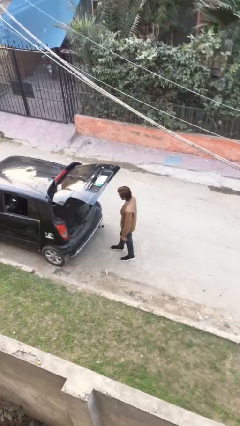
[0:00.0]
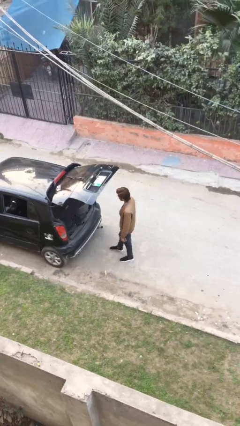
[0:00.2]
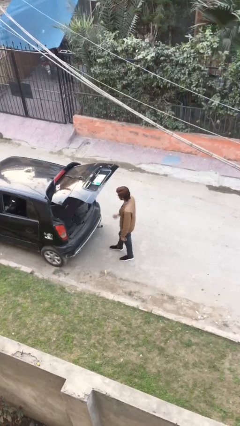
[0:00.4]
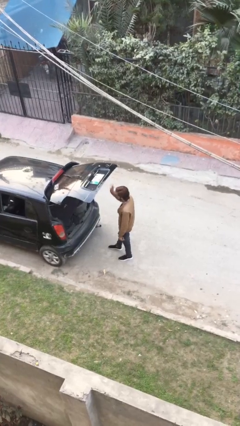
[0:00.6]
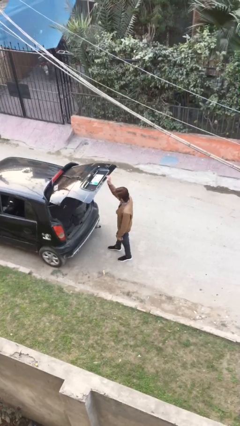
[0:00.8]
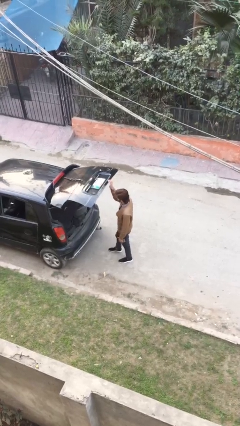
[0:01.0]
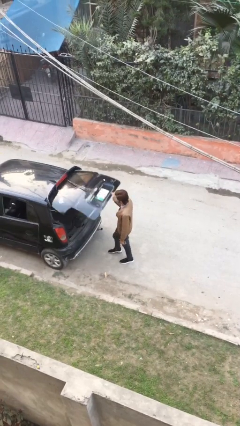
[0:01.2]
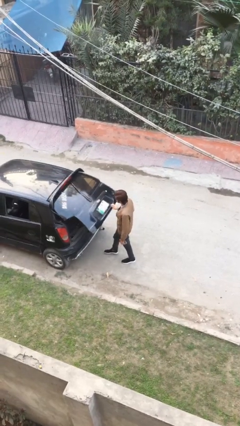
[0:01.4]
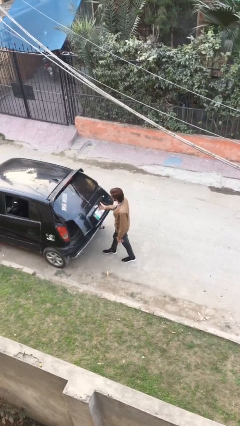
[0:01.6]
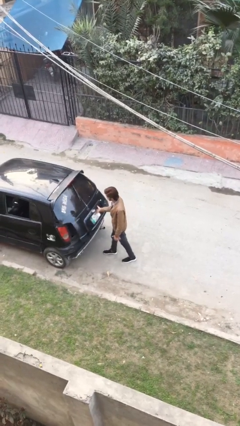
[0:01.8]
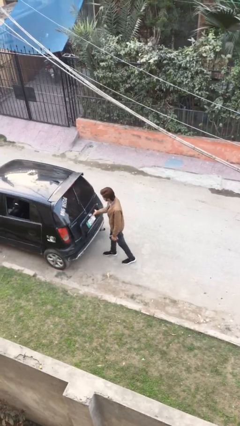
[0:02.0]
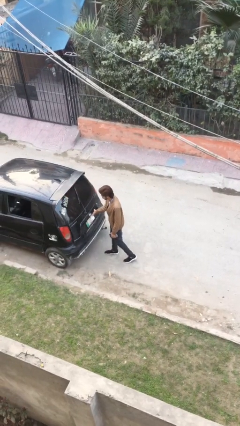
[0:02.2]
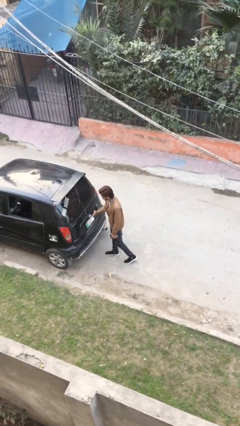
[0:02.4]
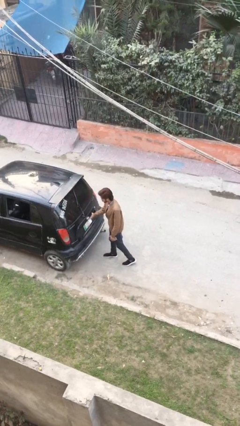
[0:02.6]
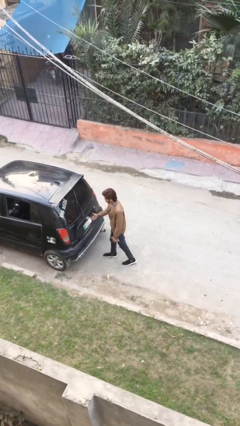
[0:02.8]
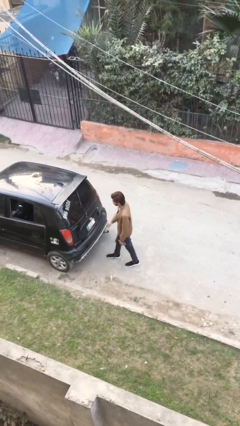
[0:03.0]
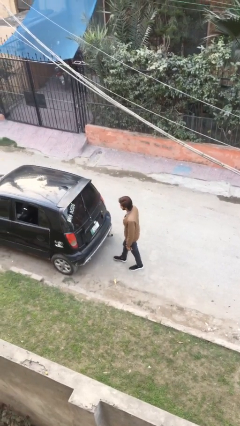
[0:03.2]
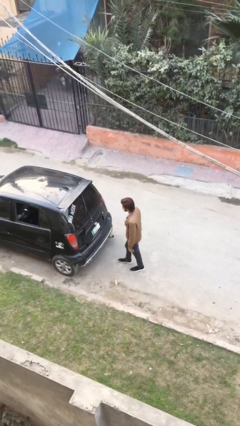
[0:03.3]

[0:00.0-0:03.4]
person closes car trunk

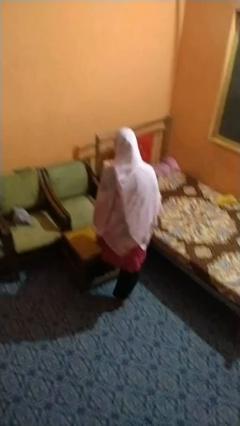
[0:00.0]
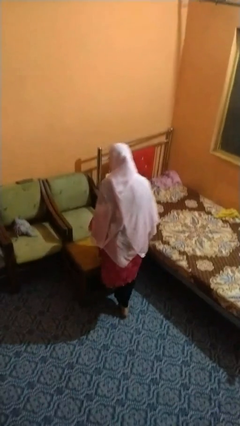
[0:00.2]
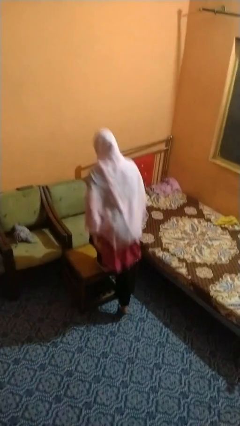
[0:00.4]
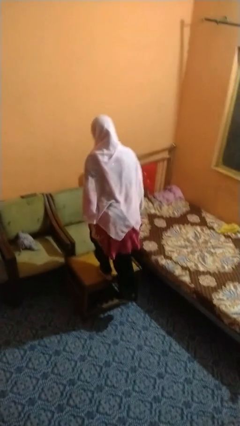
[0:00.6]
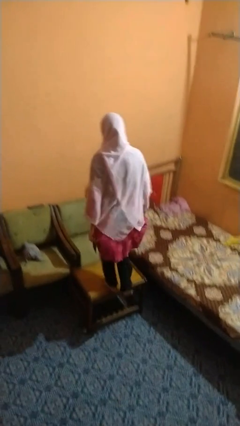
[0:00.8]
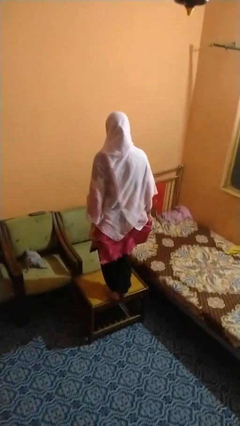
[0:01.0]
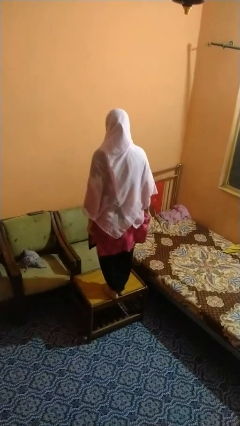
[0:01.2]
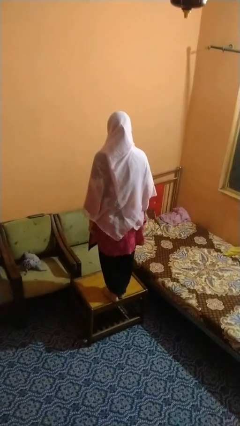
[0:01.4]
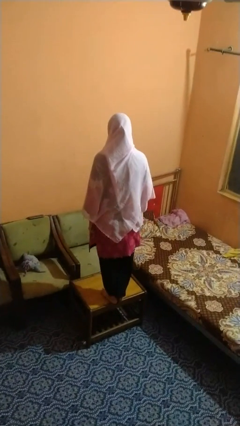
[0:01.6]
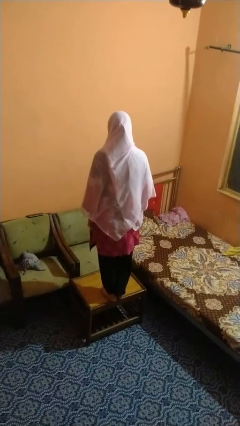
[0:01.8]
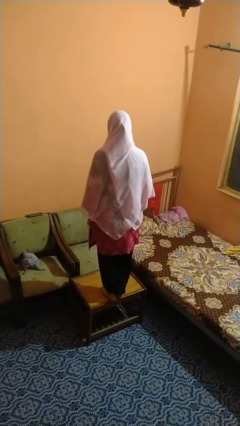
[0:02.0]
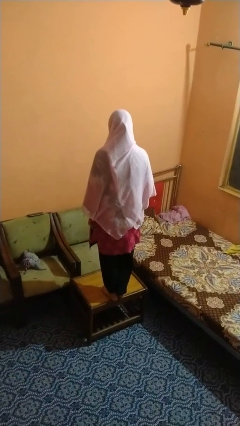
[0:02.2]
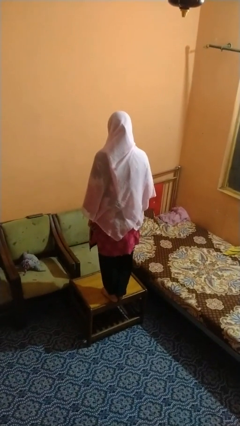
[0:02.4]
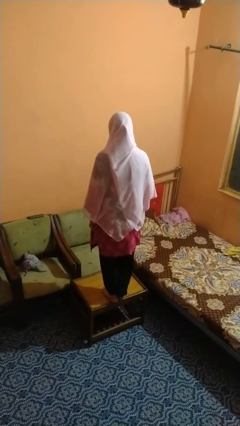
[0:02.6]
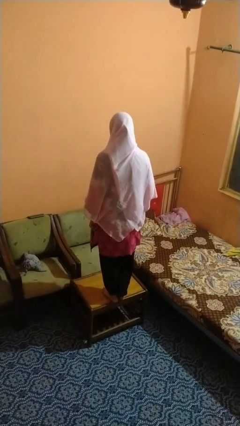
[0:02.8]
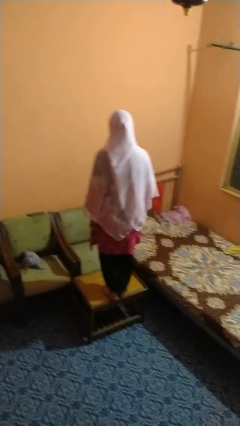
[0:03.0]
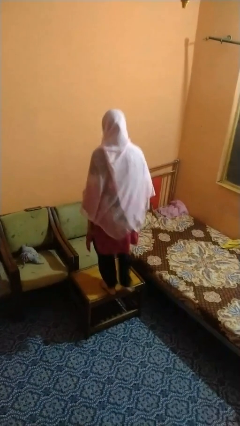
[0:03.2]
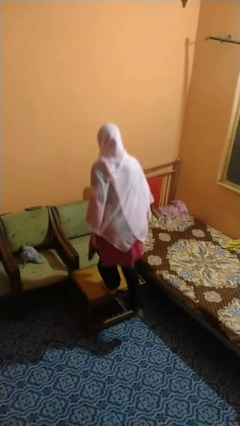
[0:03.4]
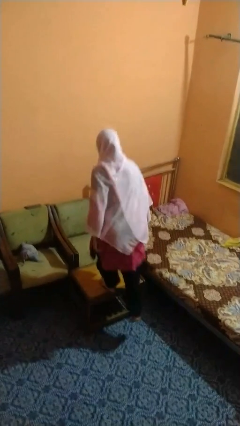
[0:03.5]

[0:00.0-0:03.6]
person climbs on table

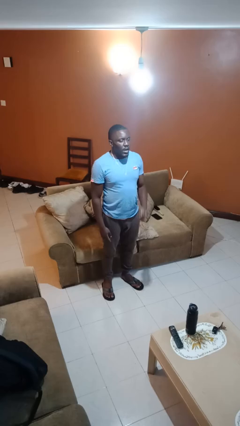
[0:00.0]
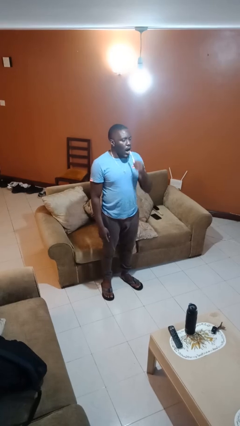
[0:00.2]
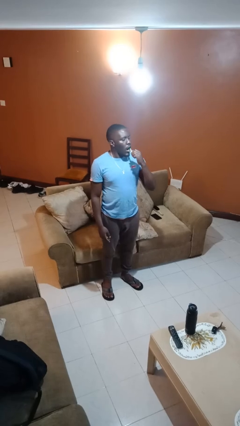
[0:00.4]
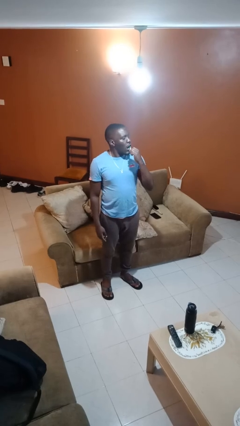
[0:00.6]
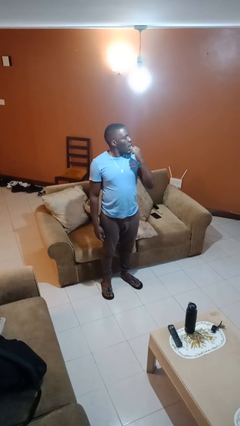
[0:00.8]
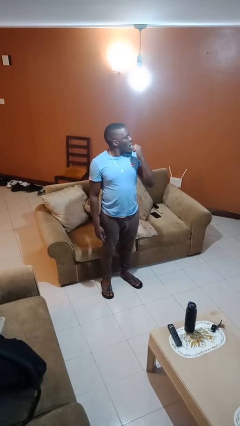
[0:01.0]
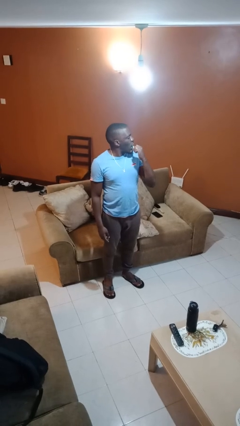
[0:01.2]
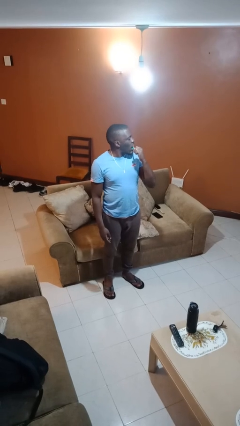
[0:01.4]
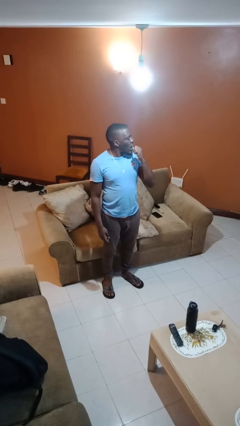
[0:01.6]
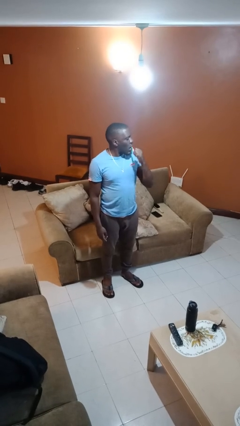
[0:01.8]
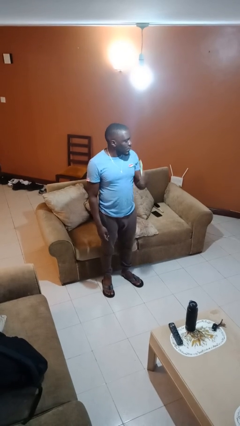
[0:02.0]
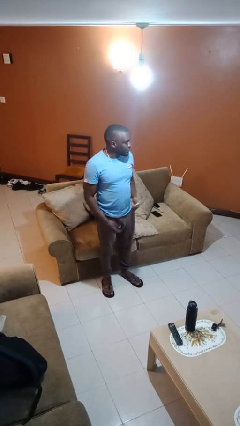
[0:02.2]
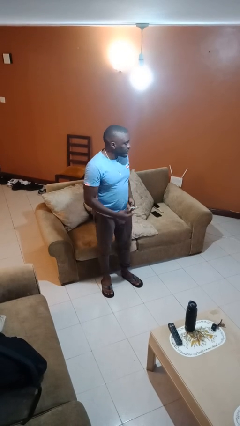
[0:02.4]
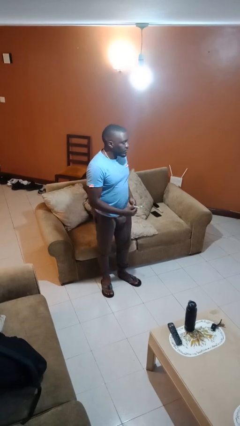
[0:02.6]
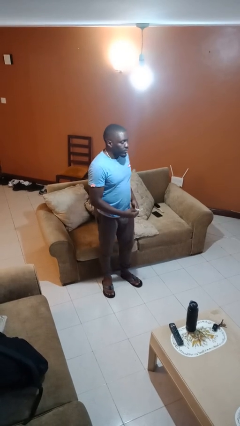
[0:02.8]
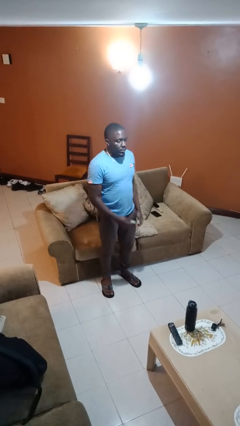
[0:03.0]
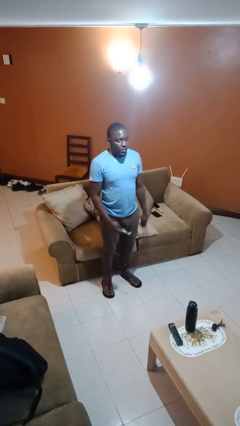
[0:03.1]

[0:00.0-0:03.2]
person brushes teeth

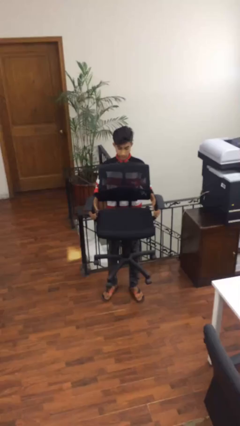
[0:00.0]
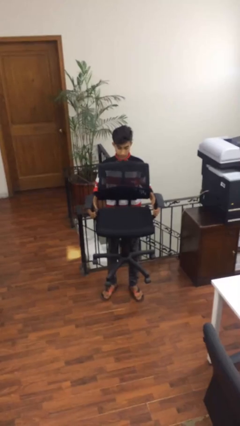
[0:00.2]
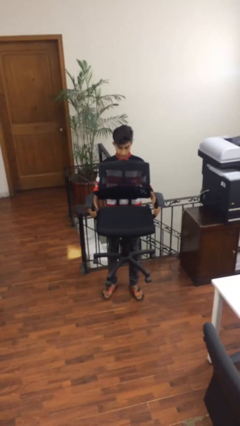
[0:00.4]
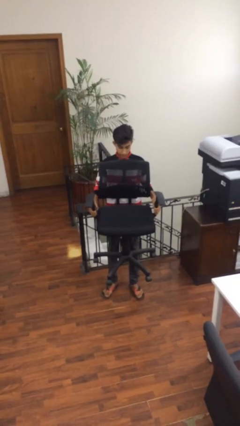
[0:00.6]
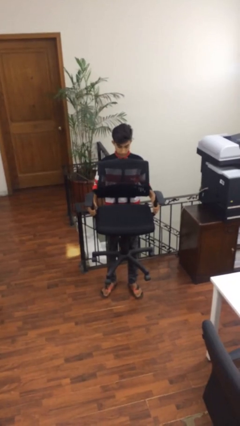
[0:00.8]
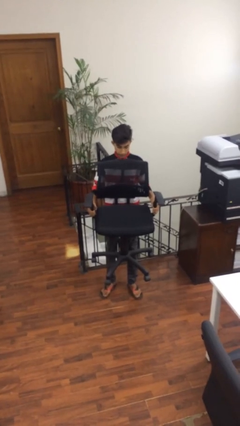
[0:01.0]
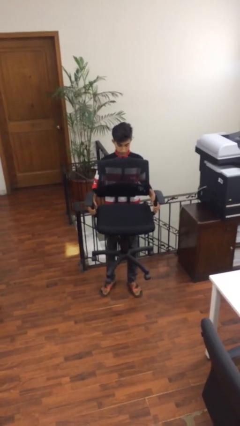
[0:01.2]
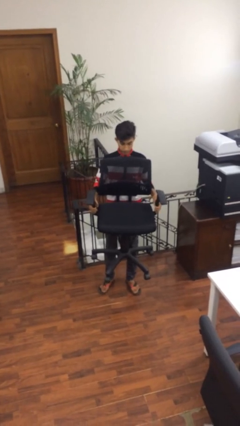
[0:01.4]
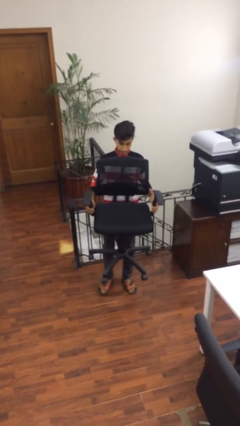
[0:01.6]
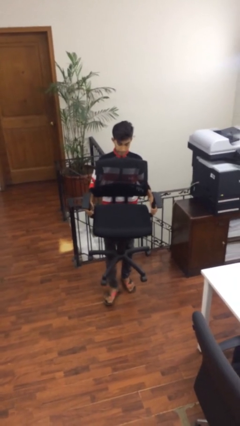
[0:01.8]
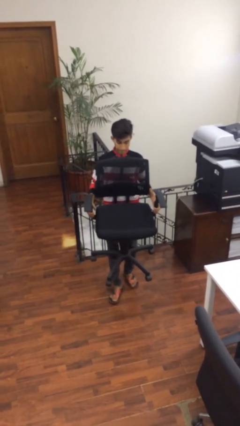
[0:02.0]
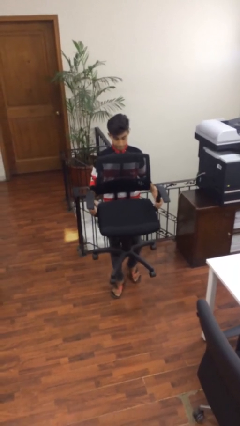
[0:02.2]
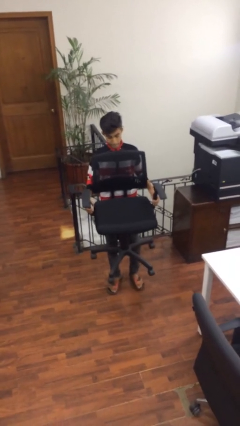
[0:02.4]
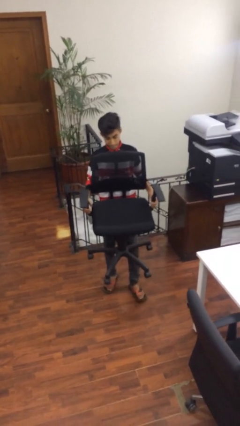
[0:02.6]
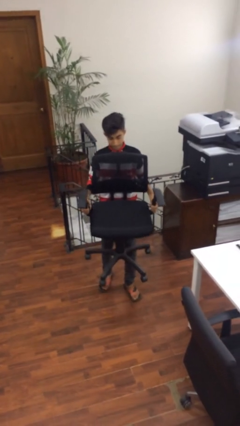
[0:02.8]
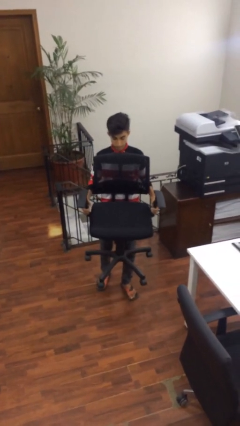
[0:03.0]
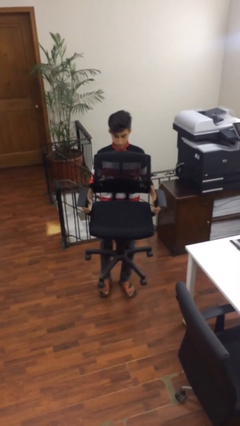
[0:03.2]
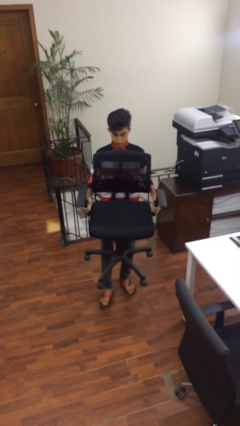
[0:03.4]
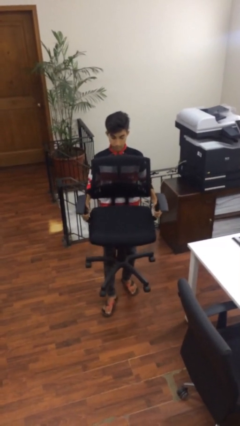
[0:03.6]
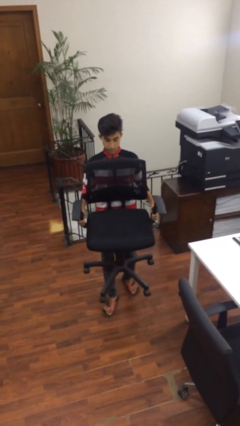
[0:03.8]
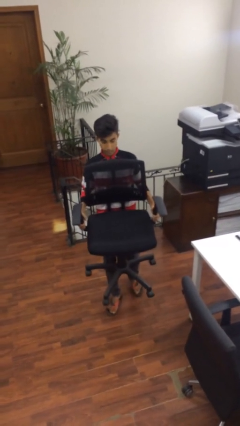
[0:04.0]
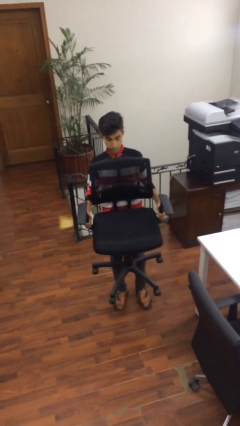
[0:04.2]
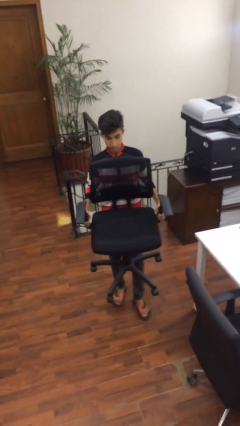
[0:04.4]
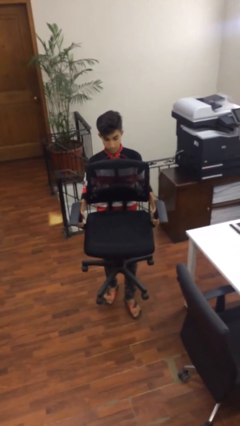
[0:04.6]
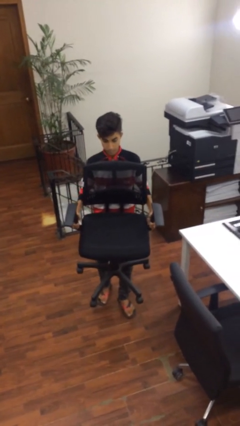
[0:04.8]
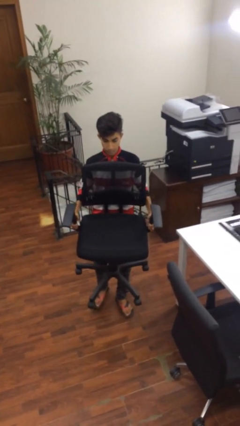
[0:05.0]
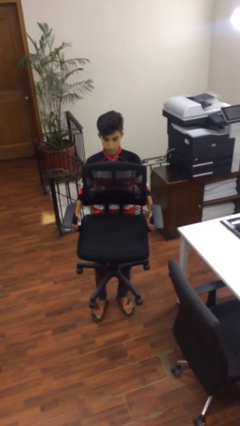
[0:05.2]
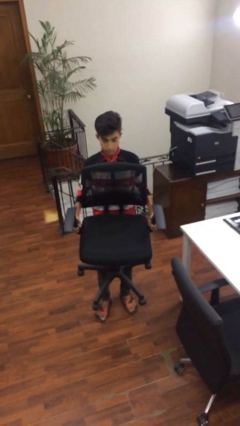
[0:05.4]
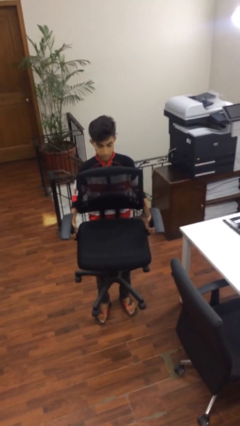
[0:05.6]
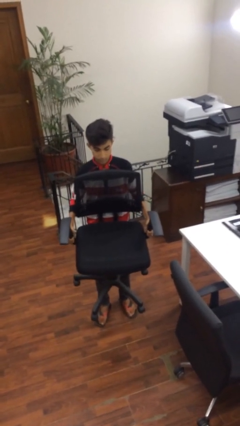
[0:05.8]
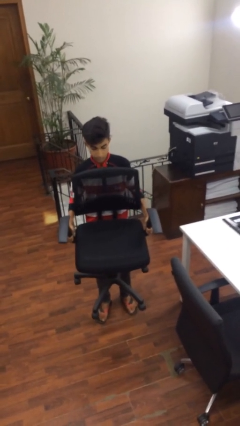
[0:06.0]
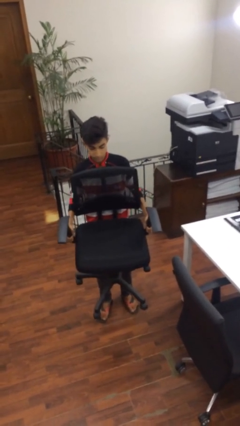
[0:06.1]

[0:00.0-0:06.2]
person carries heavy object

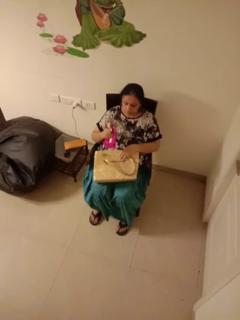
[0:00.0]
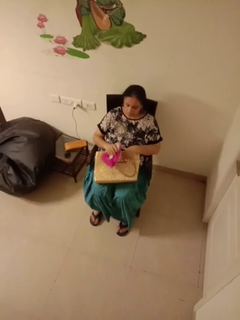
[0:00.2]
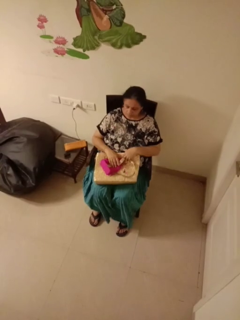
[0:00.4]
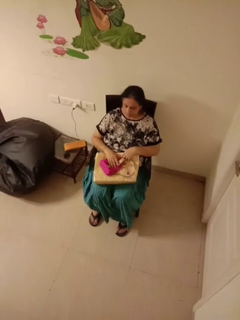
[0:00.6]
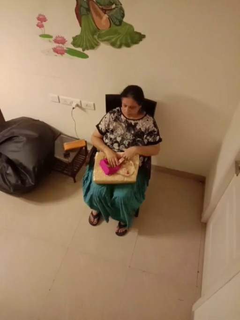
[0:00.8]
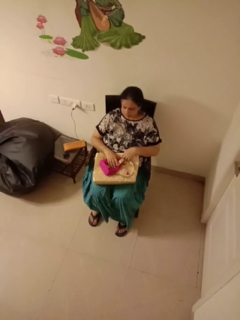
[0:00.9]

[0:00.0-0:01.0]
person takes object from purse

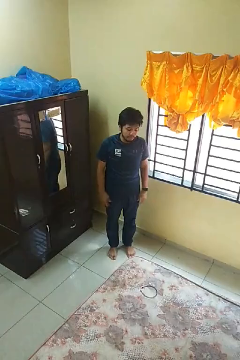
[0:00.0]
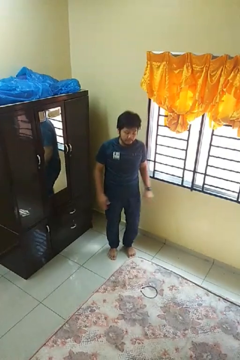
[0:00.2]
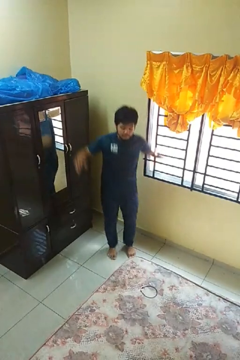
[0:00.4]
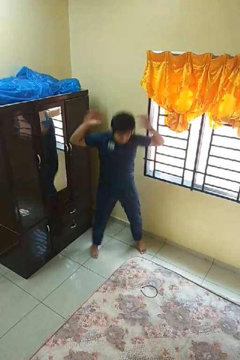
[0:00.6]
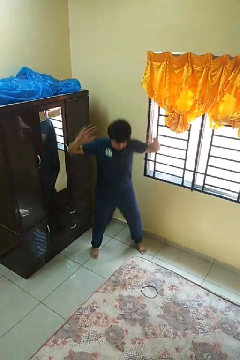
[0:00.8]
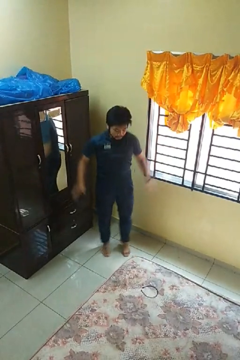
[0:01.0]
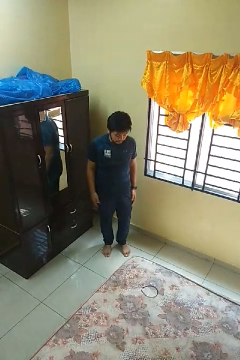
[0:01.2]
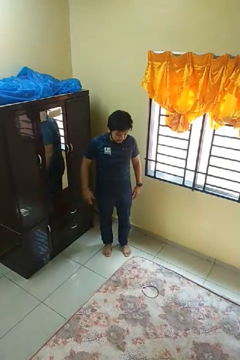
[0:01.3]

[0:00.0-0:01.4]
person exercises with jumping jacks
